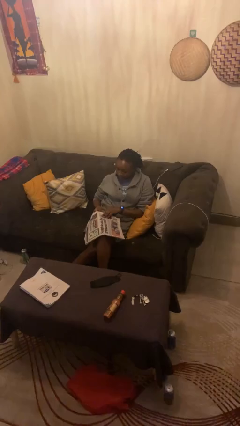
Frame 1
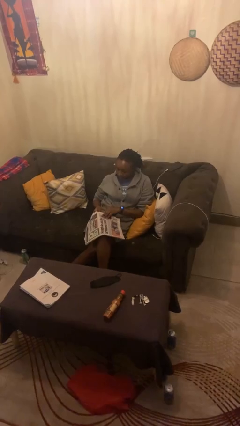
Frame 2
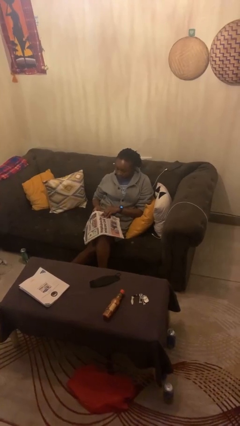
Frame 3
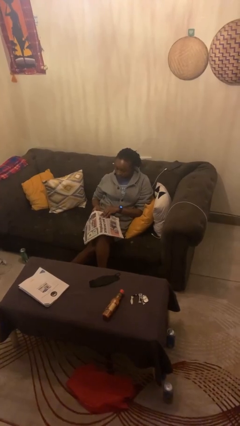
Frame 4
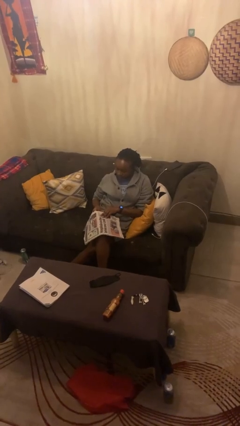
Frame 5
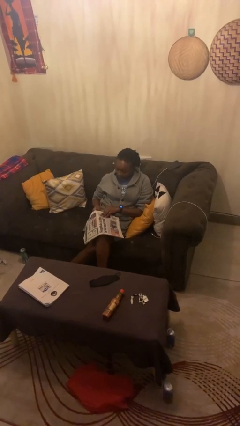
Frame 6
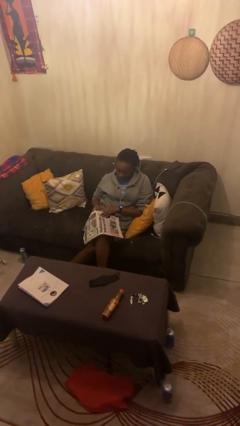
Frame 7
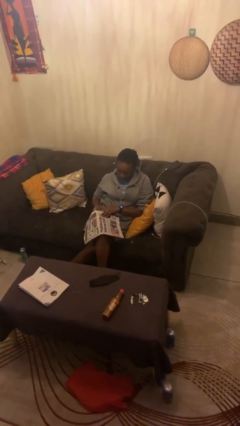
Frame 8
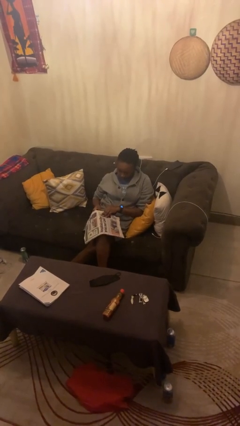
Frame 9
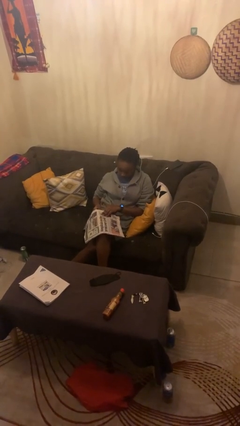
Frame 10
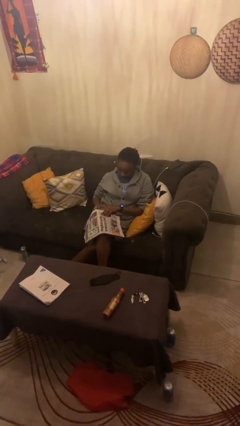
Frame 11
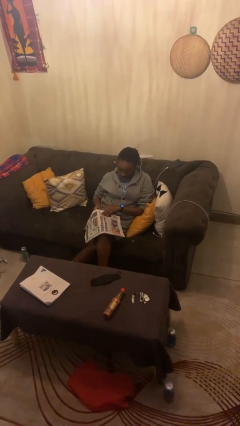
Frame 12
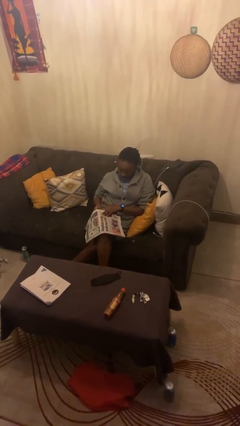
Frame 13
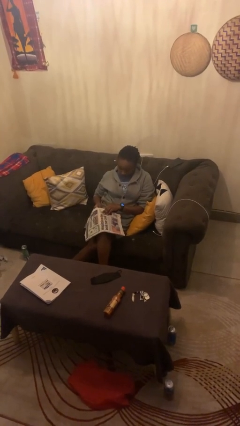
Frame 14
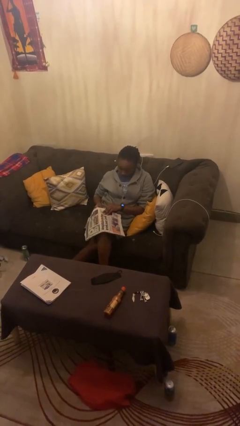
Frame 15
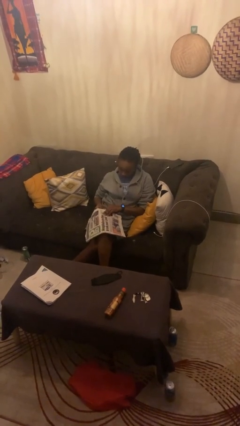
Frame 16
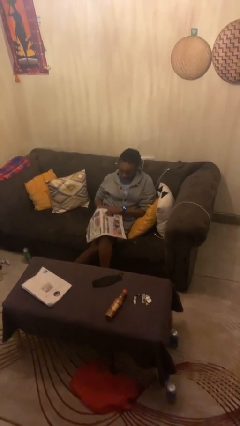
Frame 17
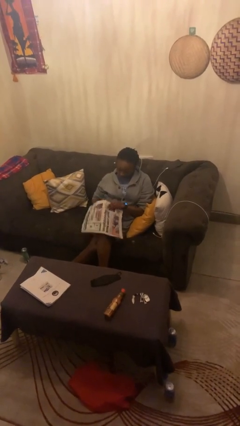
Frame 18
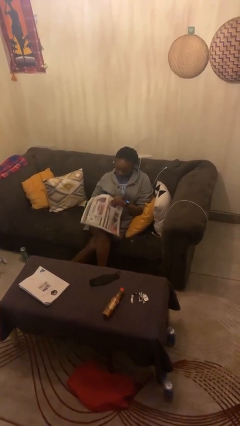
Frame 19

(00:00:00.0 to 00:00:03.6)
person reads newspaper

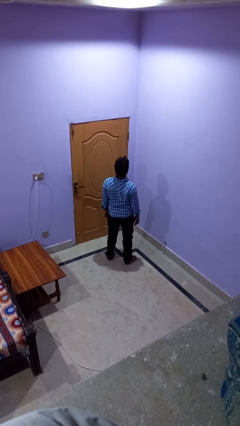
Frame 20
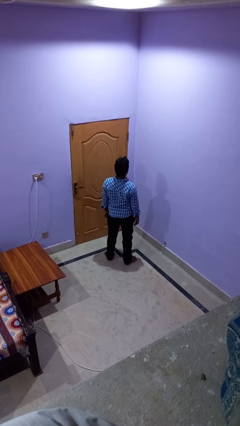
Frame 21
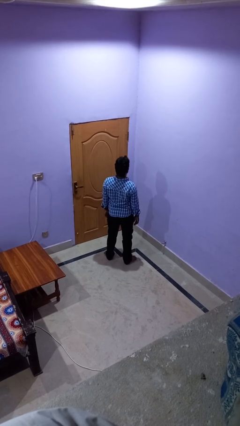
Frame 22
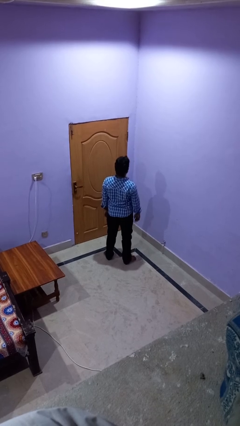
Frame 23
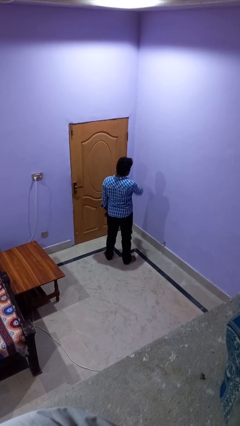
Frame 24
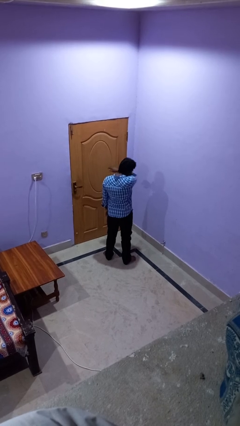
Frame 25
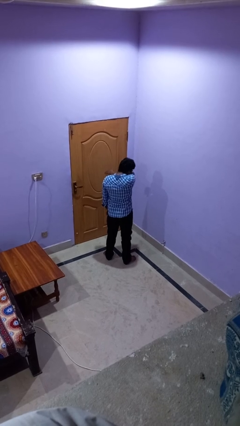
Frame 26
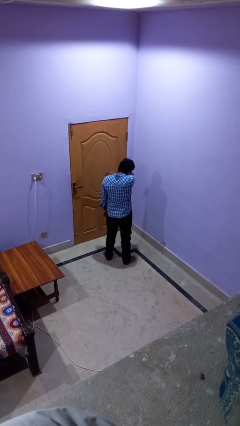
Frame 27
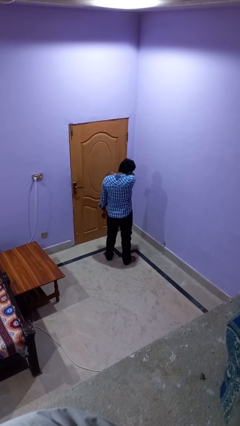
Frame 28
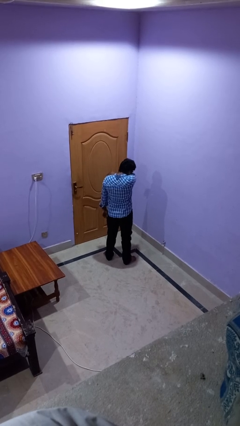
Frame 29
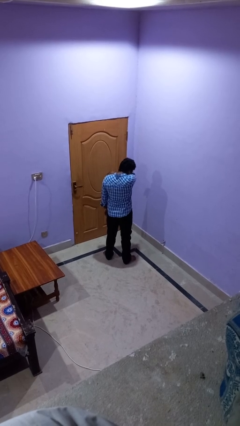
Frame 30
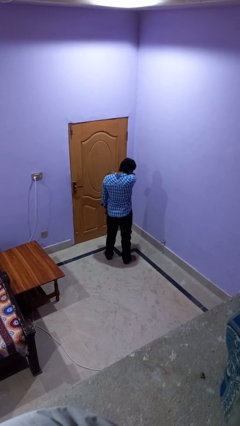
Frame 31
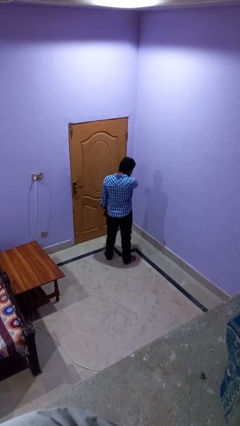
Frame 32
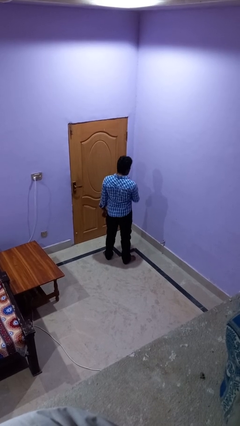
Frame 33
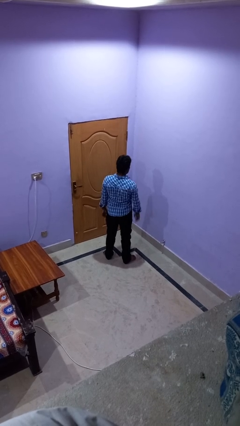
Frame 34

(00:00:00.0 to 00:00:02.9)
person sneezes into arm

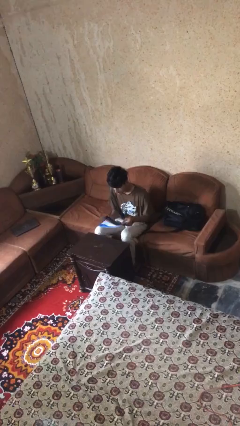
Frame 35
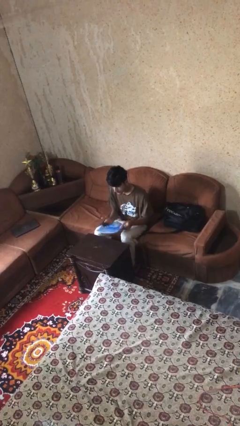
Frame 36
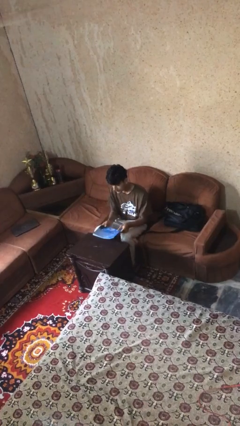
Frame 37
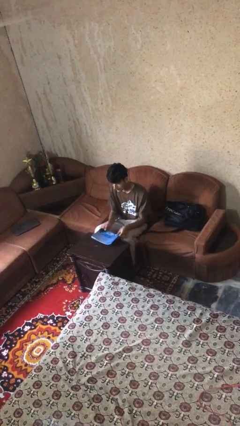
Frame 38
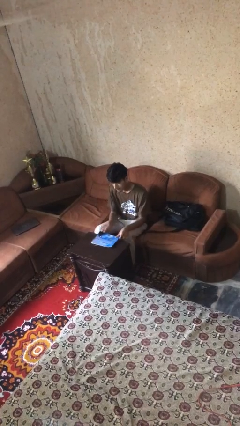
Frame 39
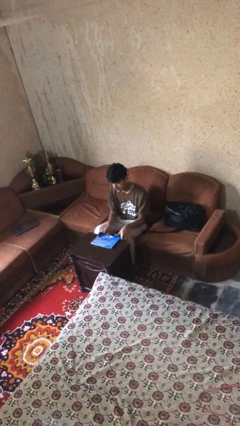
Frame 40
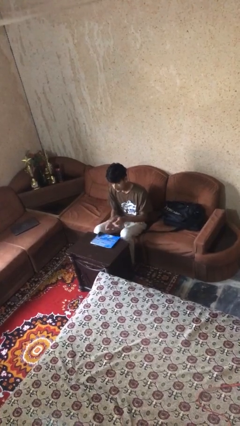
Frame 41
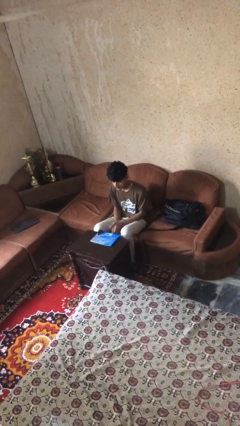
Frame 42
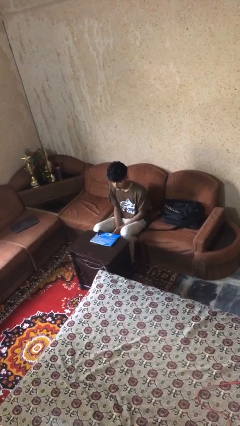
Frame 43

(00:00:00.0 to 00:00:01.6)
person puts down object on table

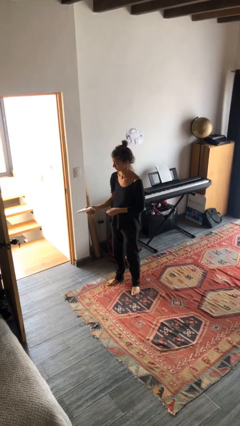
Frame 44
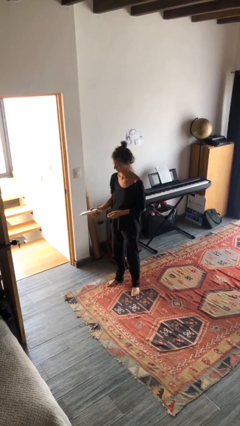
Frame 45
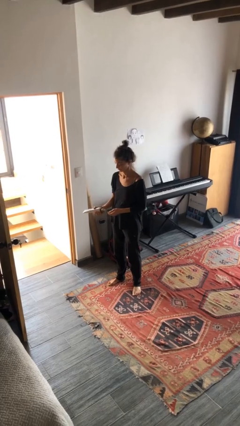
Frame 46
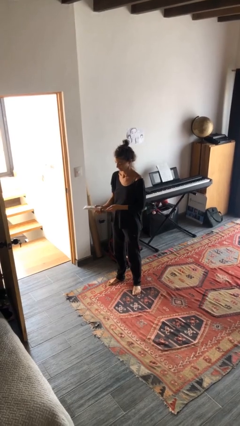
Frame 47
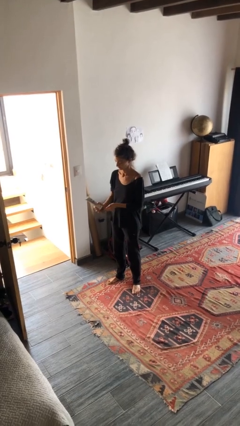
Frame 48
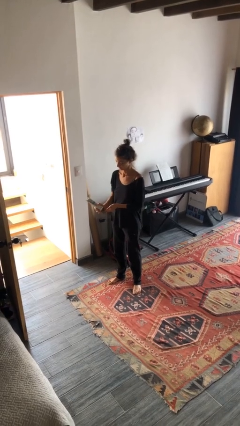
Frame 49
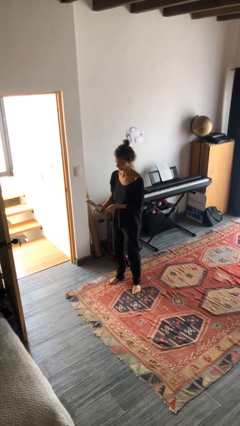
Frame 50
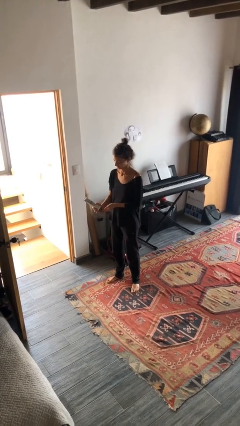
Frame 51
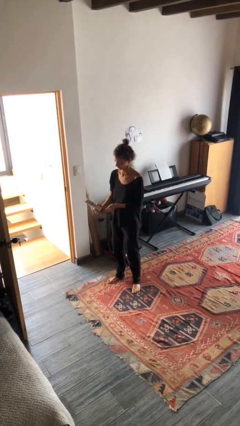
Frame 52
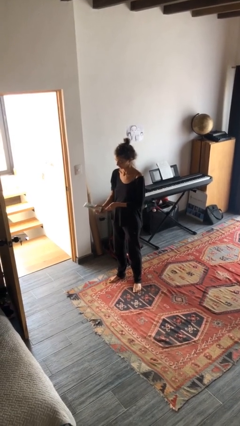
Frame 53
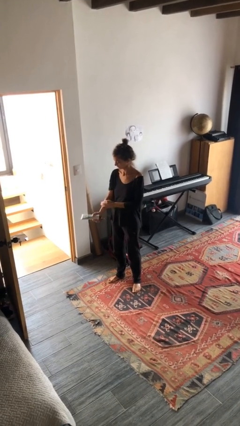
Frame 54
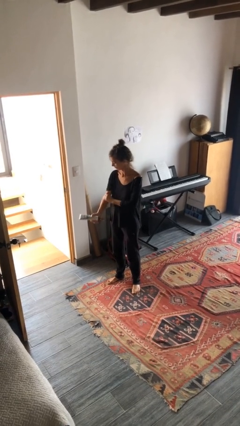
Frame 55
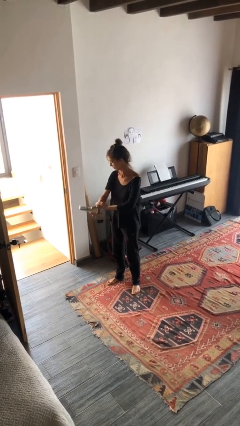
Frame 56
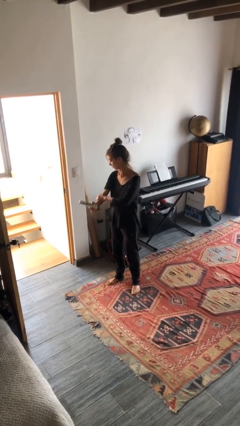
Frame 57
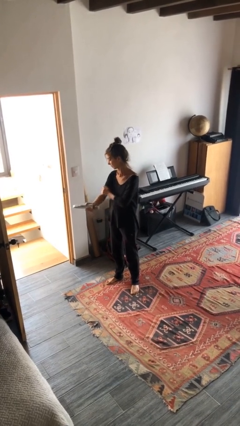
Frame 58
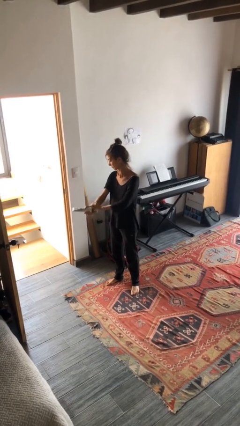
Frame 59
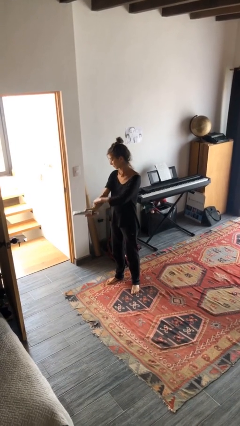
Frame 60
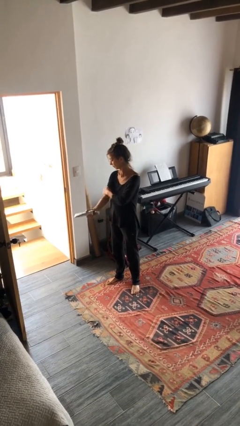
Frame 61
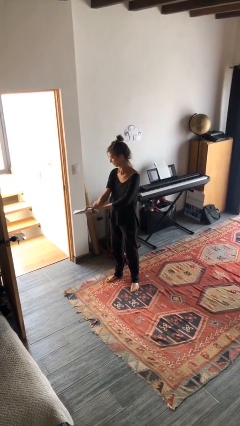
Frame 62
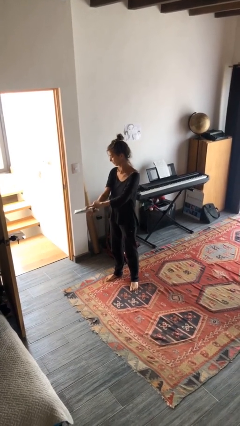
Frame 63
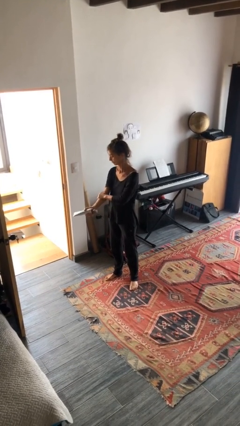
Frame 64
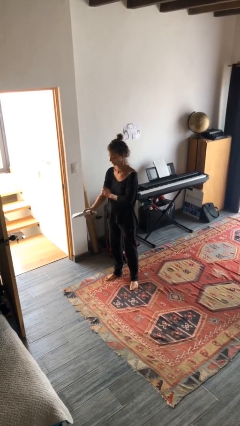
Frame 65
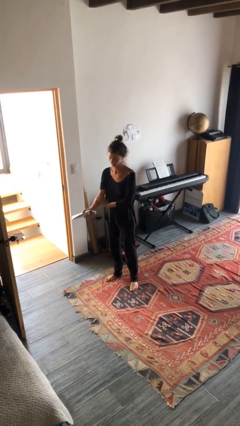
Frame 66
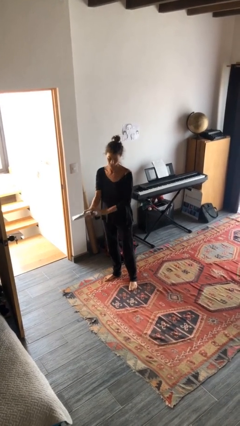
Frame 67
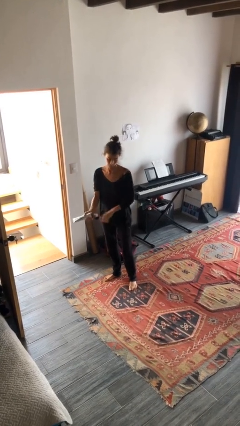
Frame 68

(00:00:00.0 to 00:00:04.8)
person applies sunscreen

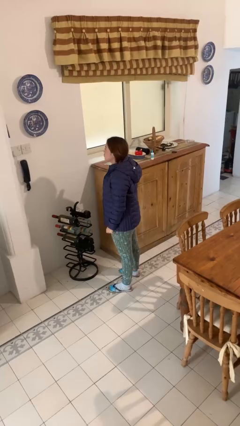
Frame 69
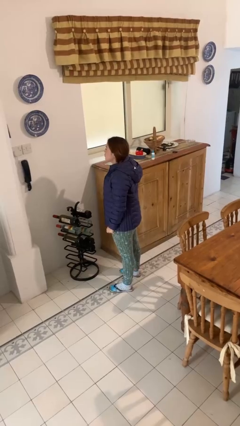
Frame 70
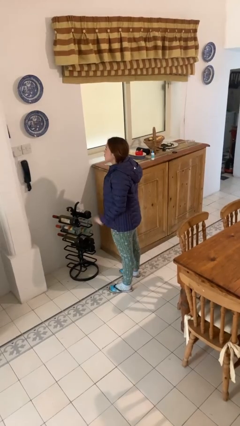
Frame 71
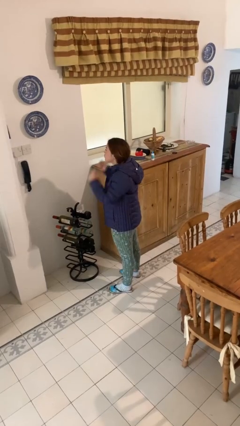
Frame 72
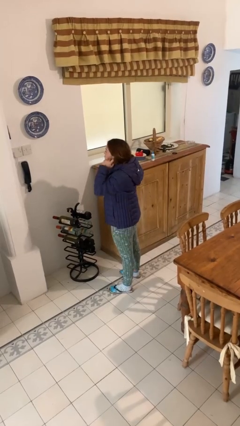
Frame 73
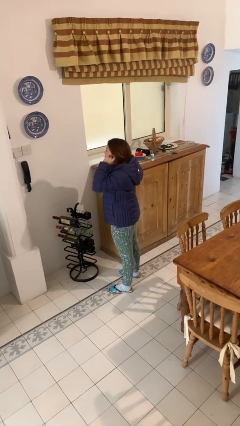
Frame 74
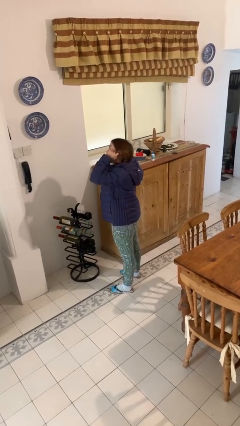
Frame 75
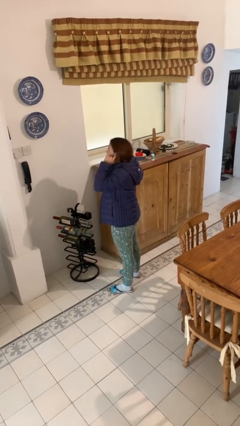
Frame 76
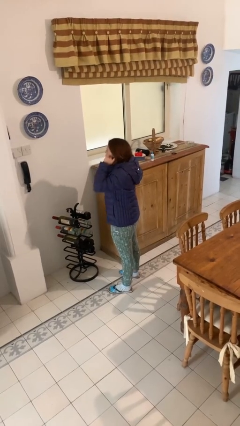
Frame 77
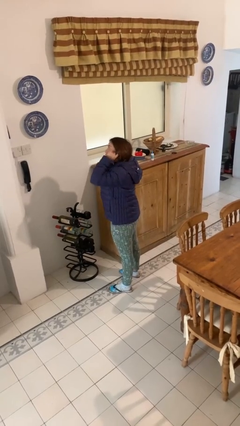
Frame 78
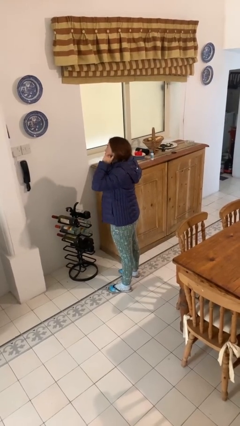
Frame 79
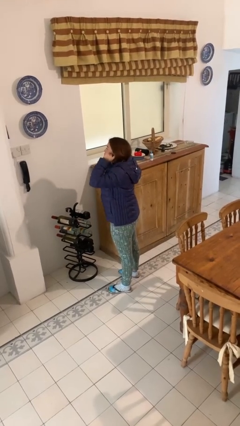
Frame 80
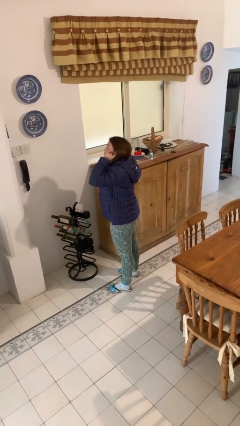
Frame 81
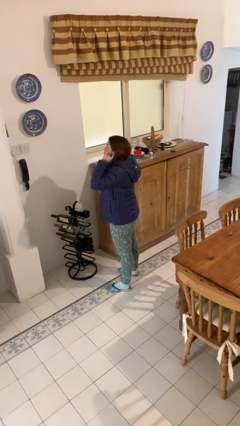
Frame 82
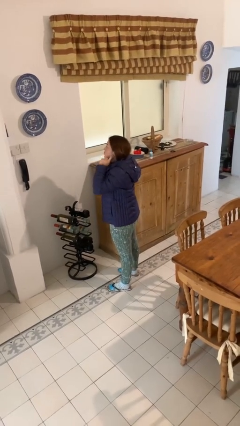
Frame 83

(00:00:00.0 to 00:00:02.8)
person puts fingers in ear

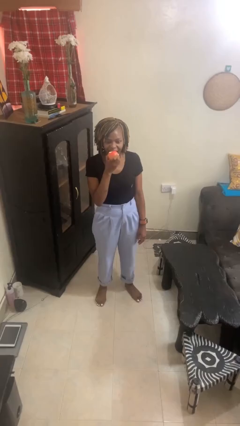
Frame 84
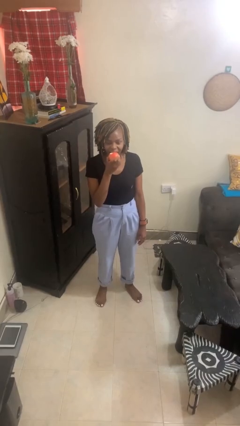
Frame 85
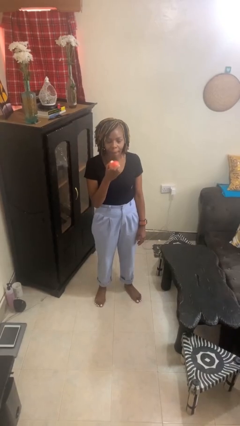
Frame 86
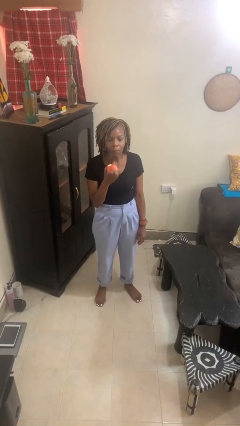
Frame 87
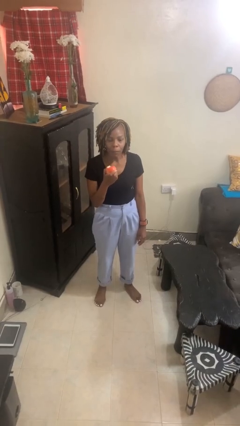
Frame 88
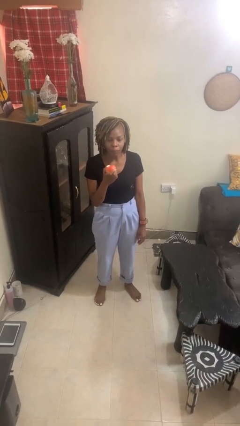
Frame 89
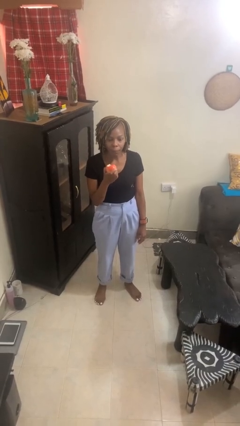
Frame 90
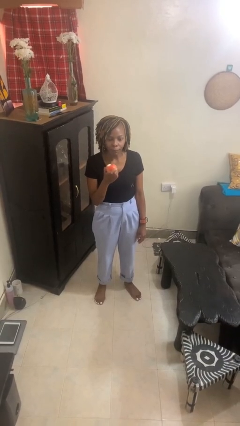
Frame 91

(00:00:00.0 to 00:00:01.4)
person eats apple

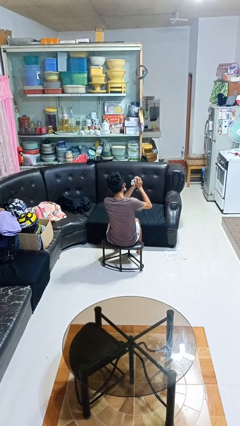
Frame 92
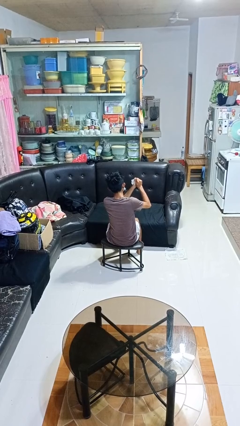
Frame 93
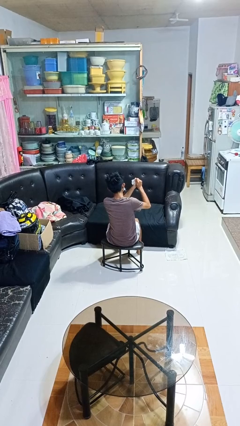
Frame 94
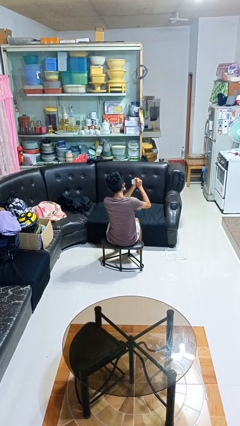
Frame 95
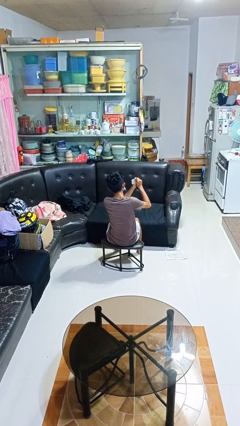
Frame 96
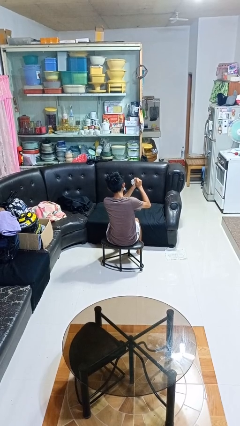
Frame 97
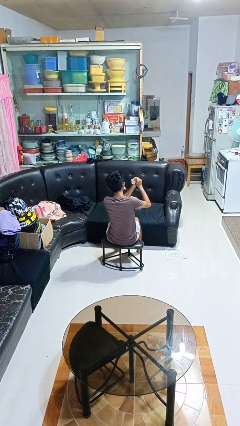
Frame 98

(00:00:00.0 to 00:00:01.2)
person crumples paper
